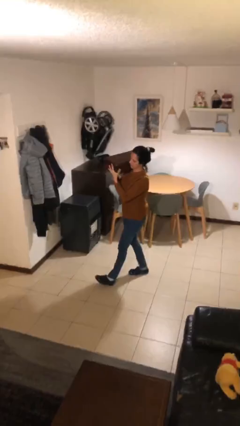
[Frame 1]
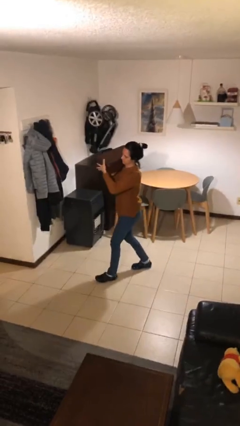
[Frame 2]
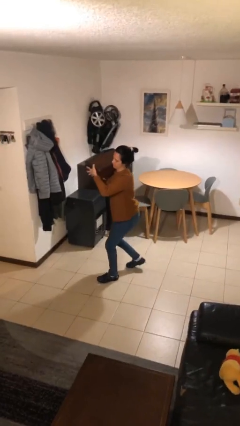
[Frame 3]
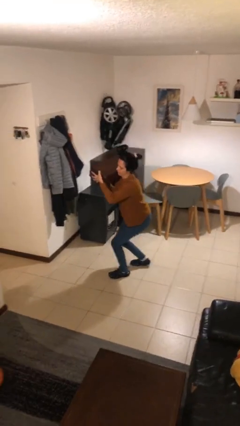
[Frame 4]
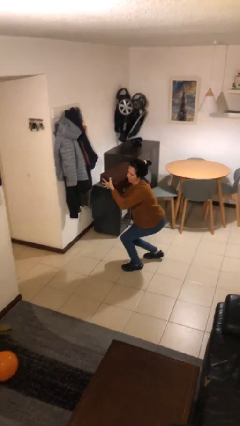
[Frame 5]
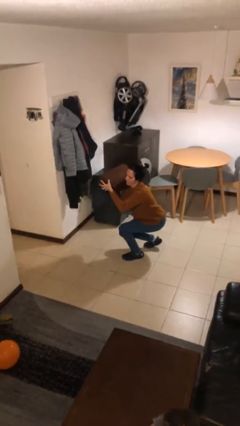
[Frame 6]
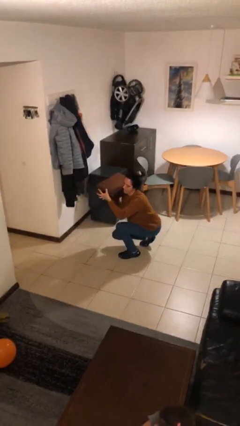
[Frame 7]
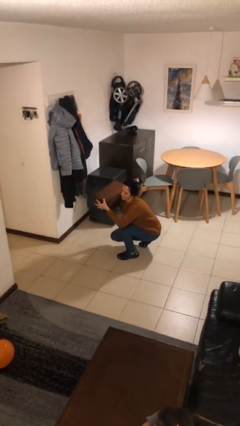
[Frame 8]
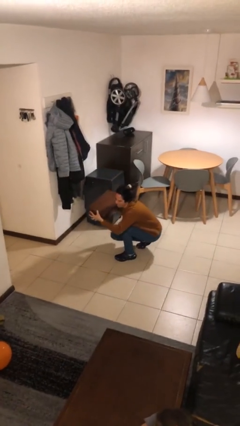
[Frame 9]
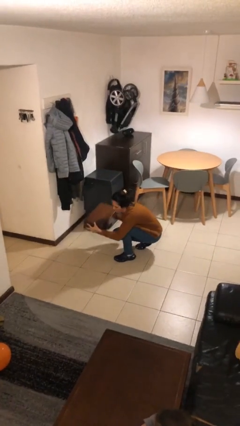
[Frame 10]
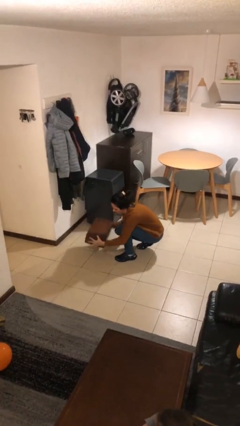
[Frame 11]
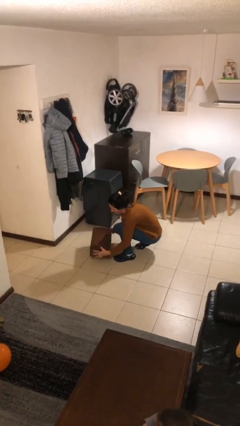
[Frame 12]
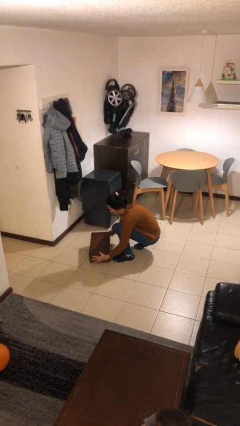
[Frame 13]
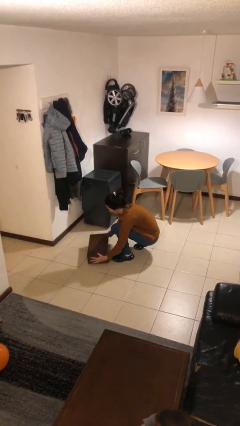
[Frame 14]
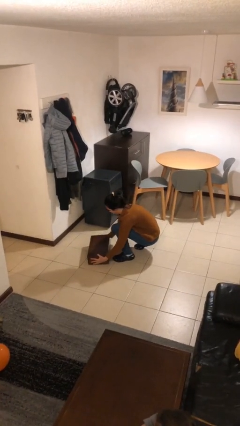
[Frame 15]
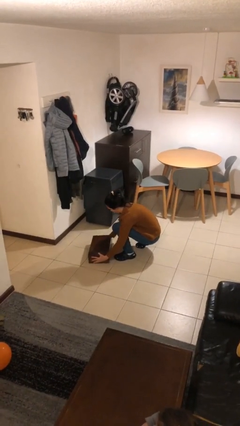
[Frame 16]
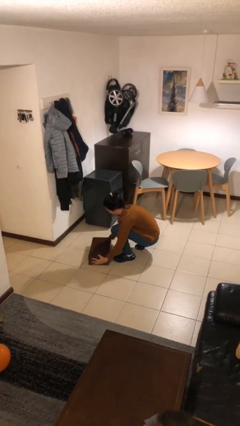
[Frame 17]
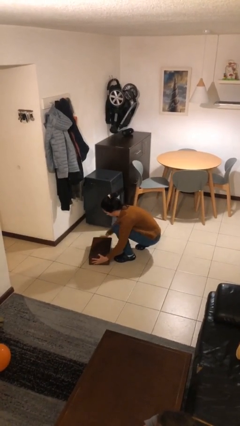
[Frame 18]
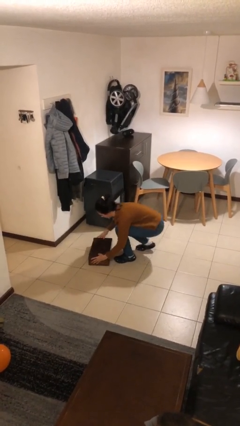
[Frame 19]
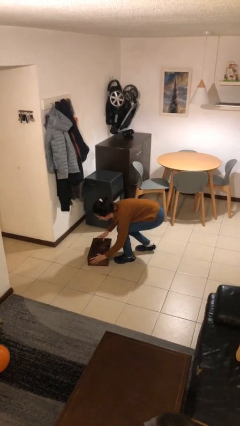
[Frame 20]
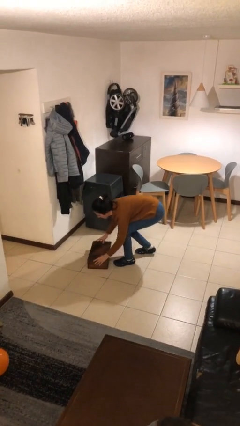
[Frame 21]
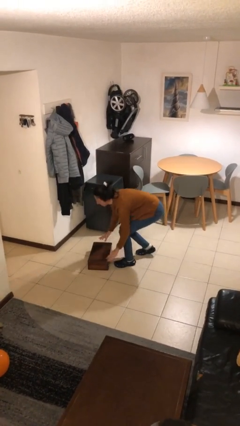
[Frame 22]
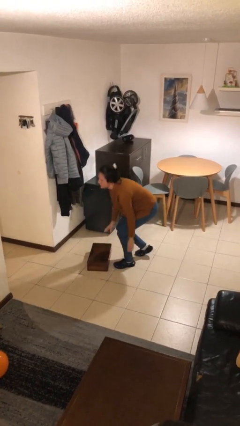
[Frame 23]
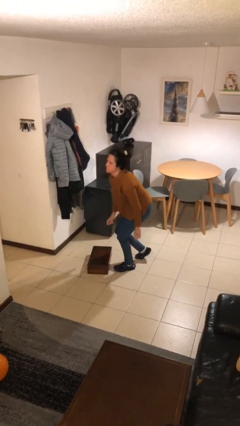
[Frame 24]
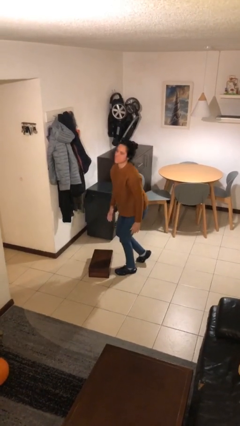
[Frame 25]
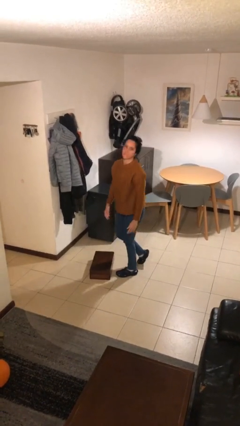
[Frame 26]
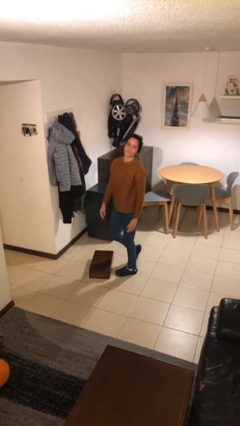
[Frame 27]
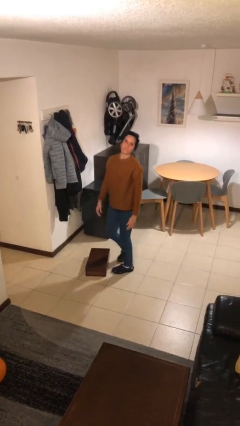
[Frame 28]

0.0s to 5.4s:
person puts down object on floor

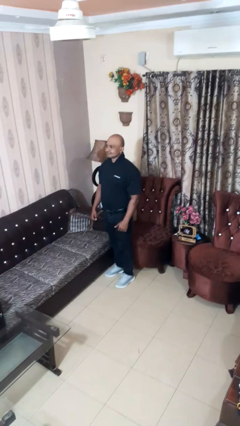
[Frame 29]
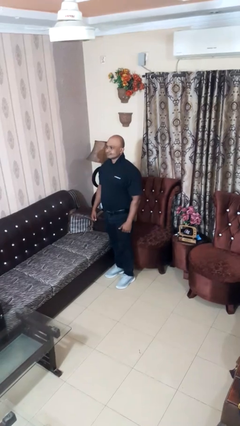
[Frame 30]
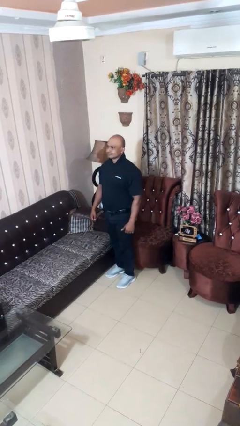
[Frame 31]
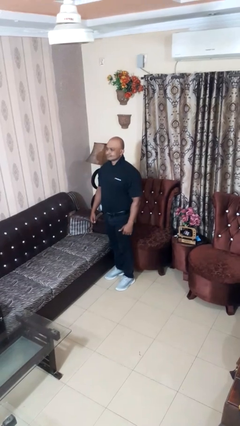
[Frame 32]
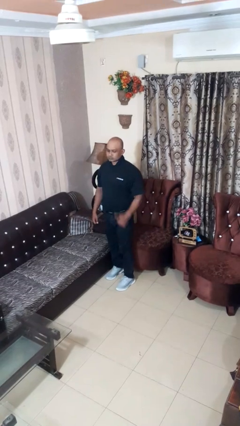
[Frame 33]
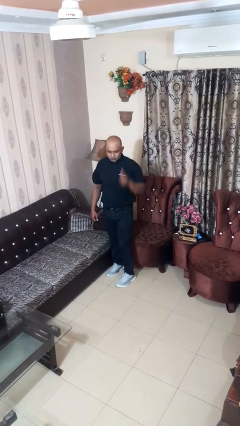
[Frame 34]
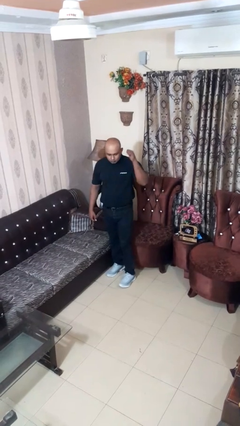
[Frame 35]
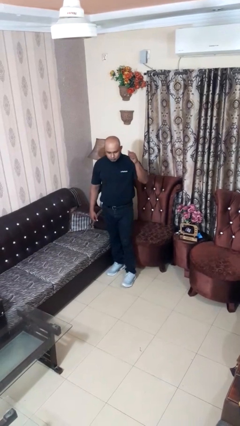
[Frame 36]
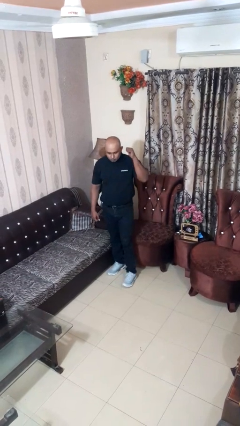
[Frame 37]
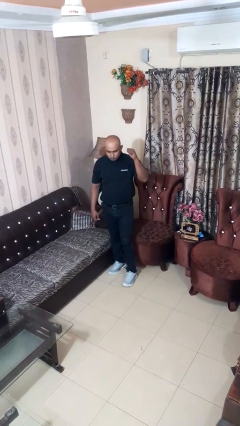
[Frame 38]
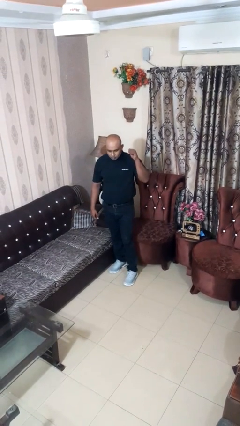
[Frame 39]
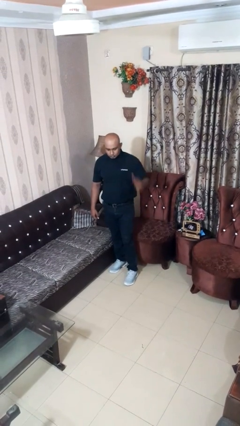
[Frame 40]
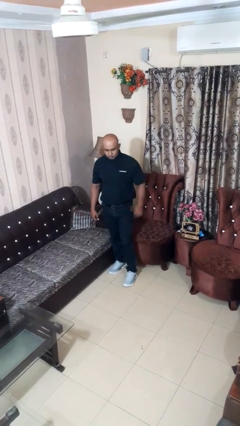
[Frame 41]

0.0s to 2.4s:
person gestures behind me

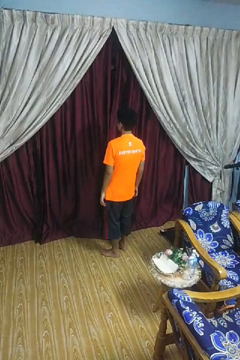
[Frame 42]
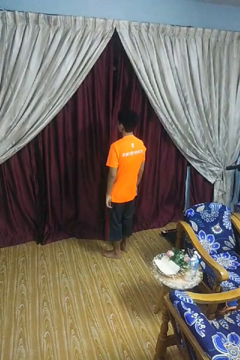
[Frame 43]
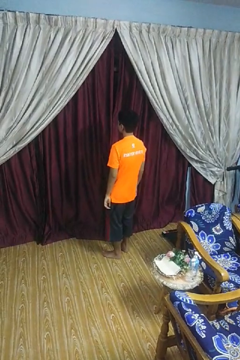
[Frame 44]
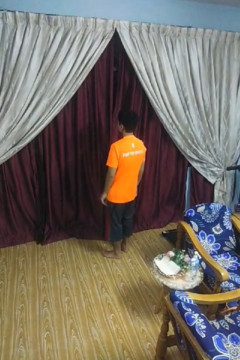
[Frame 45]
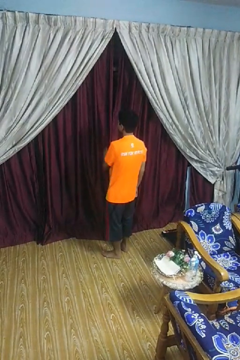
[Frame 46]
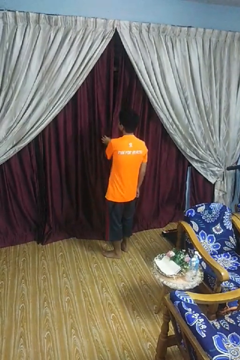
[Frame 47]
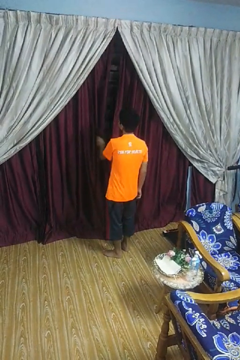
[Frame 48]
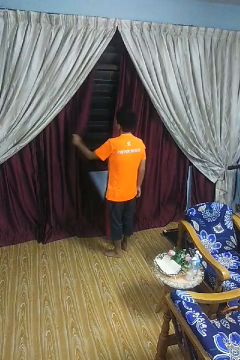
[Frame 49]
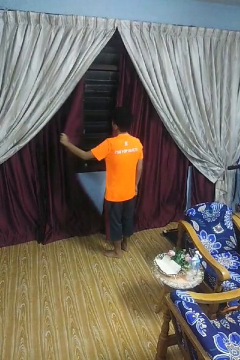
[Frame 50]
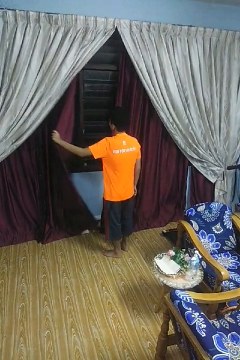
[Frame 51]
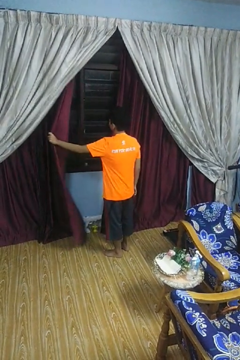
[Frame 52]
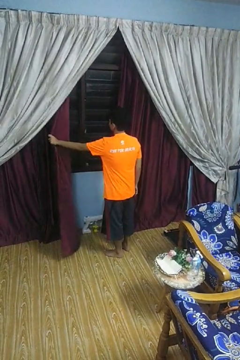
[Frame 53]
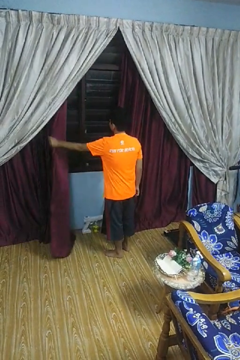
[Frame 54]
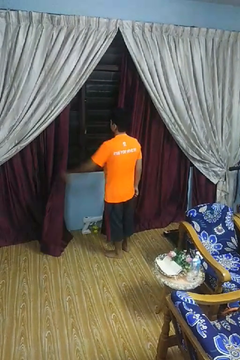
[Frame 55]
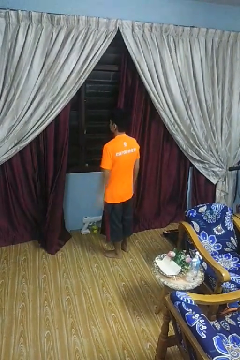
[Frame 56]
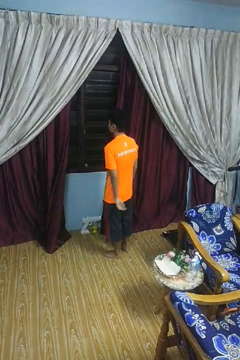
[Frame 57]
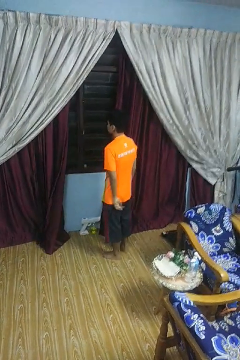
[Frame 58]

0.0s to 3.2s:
person opens curtains

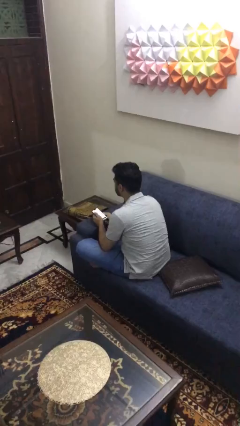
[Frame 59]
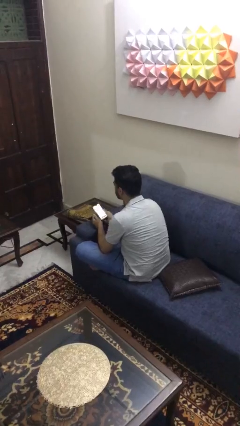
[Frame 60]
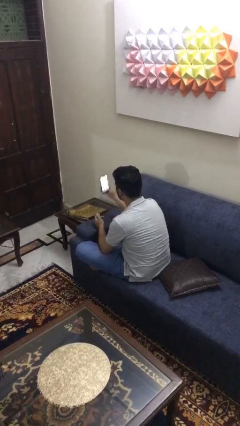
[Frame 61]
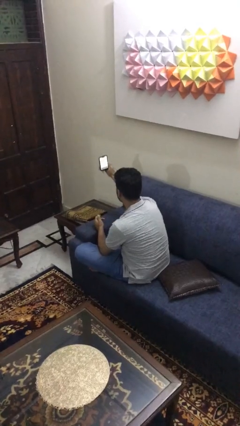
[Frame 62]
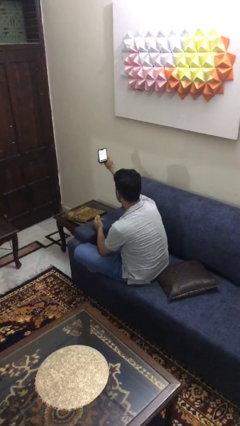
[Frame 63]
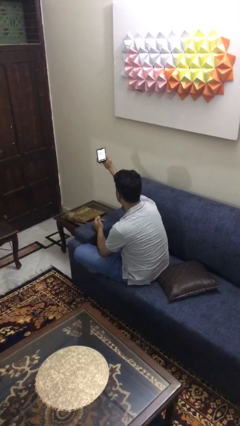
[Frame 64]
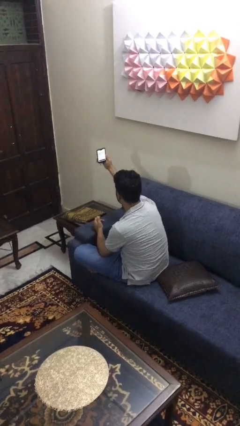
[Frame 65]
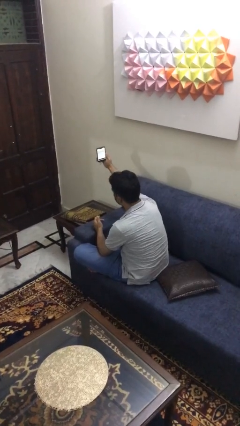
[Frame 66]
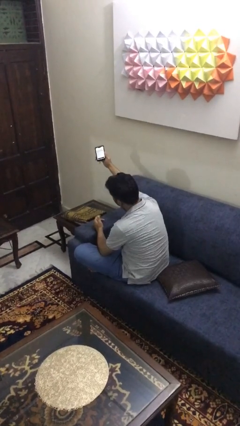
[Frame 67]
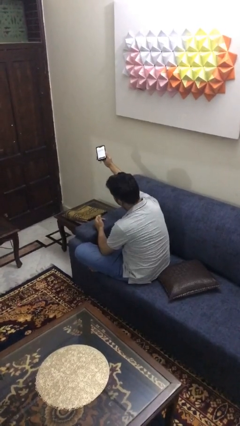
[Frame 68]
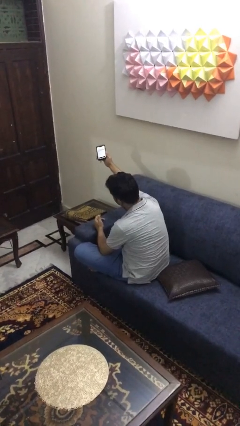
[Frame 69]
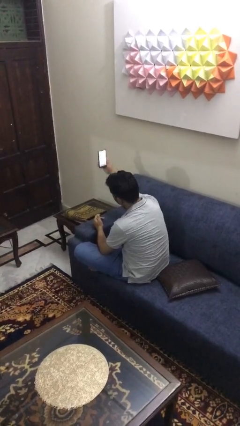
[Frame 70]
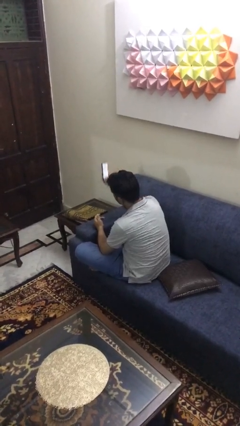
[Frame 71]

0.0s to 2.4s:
person takes selfie

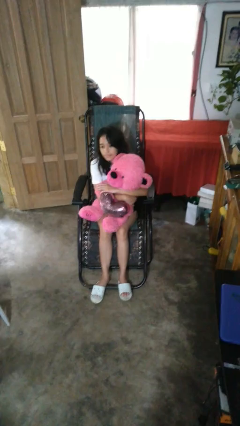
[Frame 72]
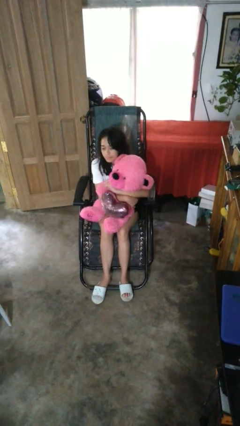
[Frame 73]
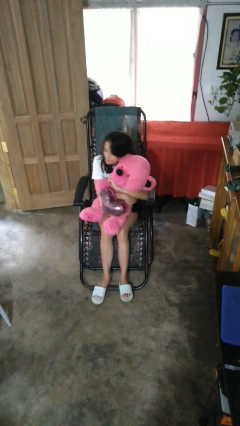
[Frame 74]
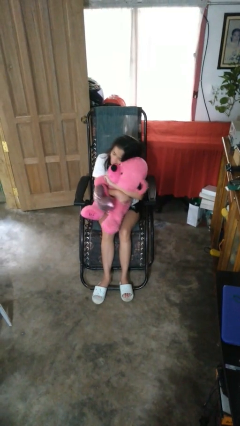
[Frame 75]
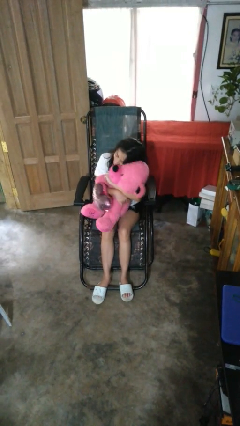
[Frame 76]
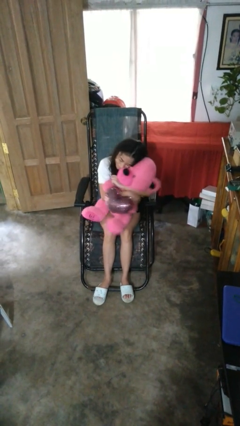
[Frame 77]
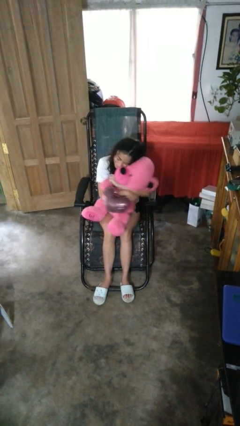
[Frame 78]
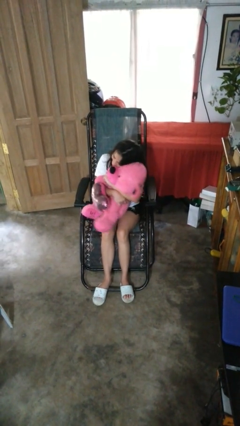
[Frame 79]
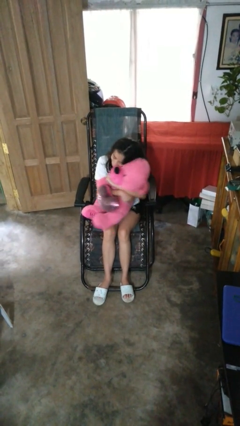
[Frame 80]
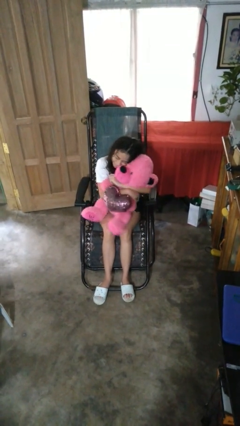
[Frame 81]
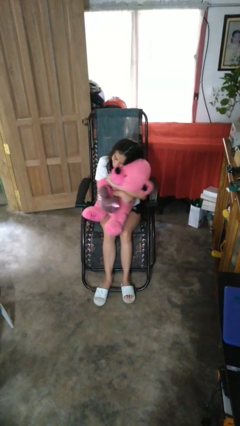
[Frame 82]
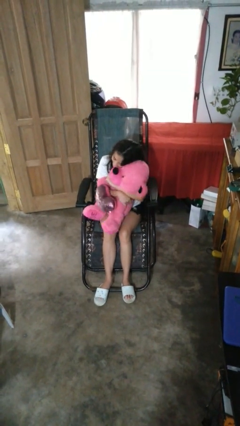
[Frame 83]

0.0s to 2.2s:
person hugs stuffed animal

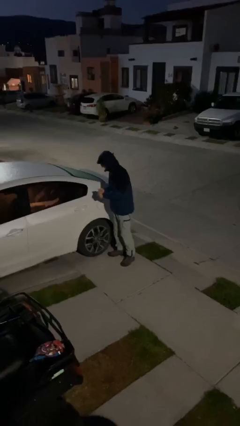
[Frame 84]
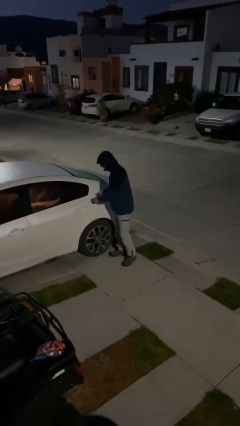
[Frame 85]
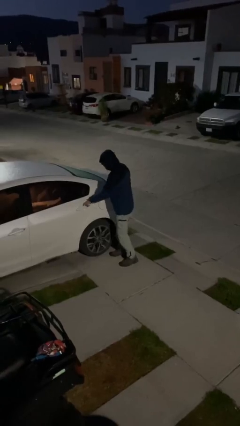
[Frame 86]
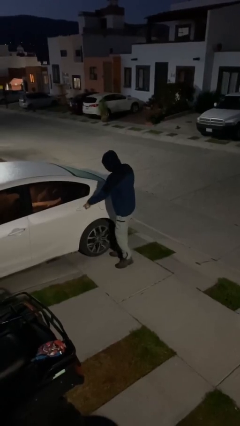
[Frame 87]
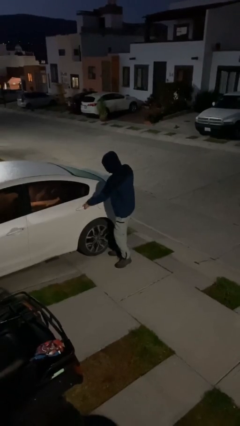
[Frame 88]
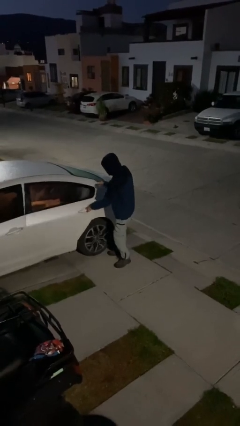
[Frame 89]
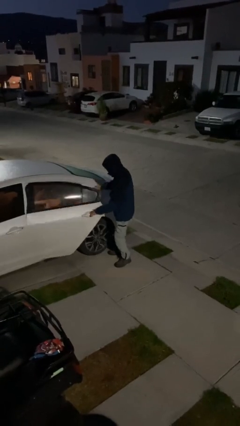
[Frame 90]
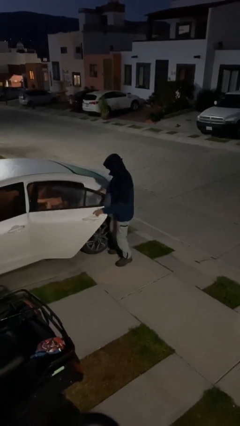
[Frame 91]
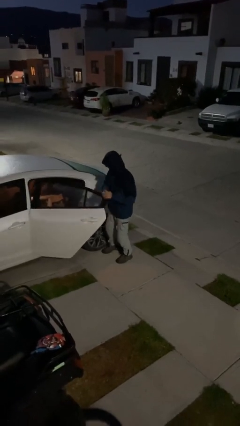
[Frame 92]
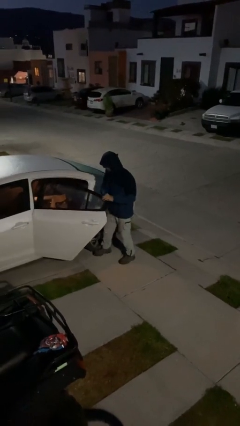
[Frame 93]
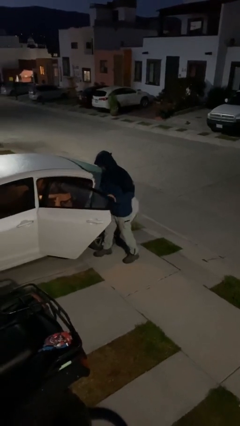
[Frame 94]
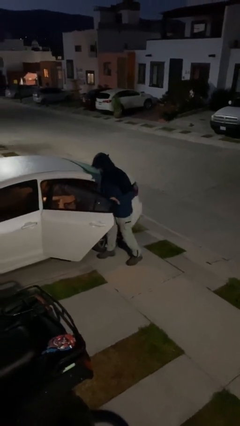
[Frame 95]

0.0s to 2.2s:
person opens car door

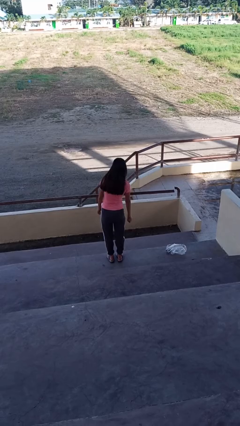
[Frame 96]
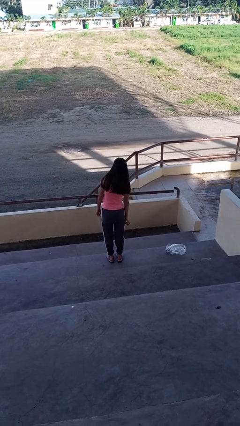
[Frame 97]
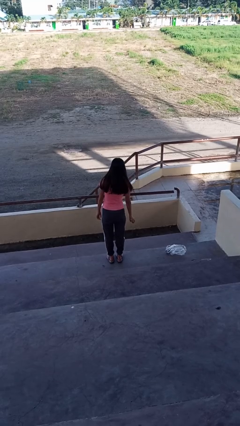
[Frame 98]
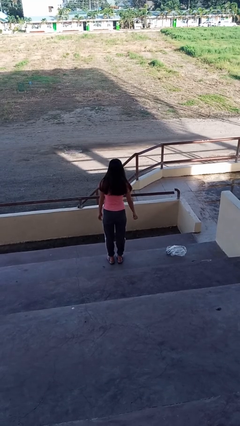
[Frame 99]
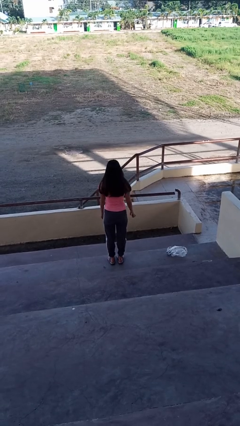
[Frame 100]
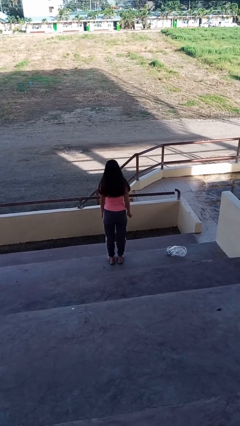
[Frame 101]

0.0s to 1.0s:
person catches dropped object
